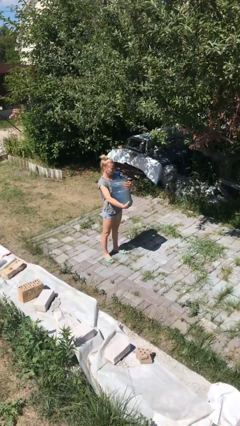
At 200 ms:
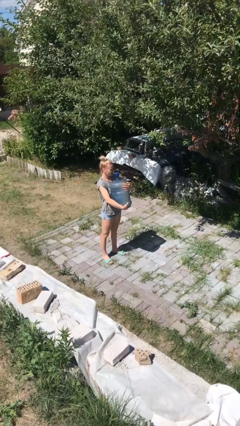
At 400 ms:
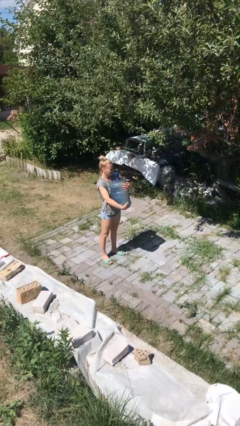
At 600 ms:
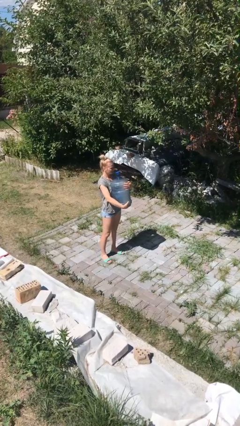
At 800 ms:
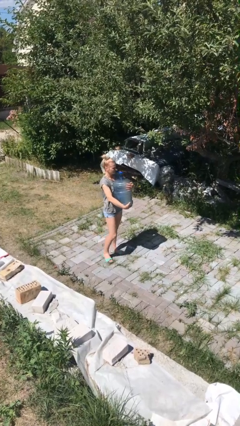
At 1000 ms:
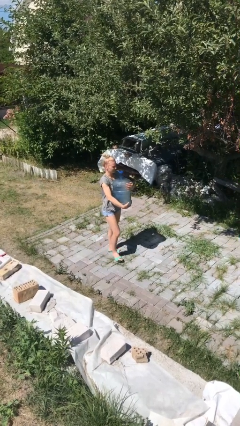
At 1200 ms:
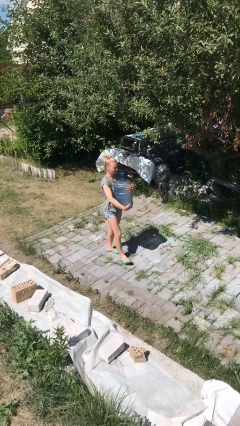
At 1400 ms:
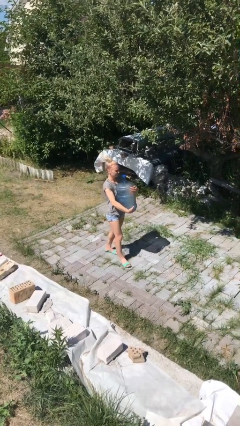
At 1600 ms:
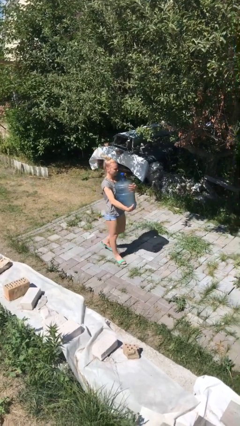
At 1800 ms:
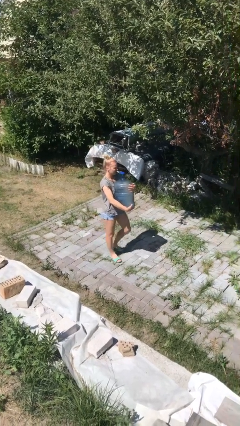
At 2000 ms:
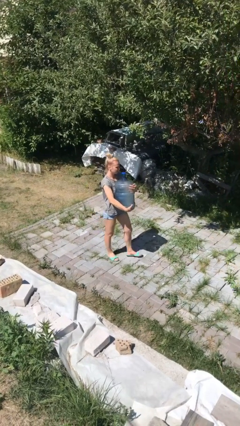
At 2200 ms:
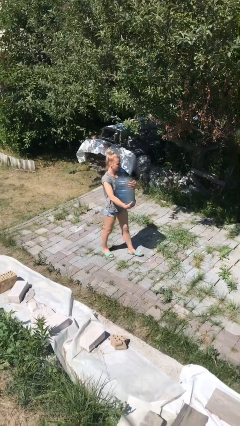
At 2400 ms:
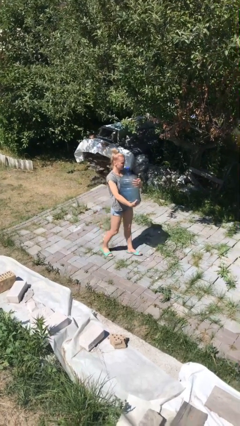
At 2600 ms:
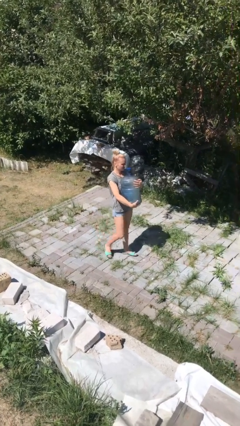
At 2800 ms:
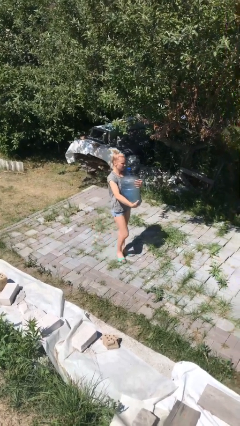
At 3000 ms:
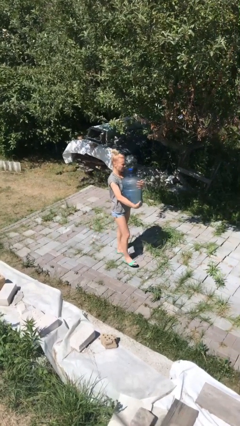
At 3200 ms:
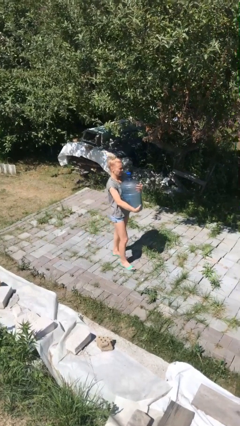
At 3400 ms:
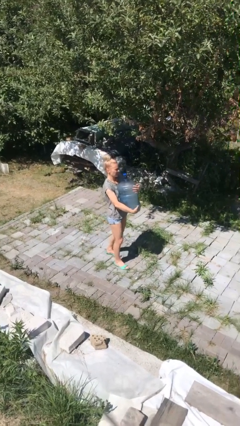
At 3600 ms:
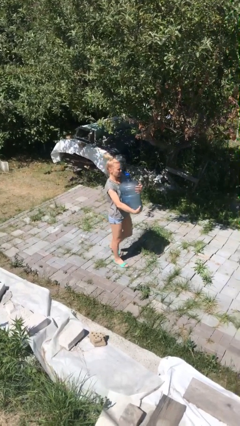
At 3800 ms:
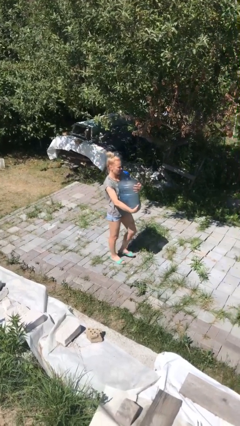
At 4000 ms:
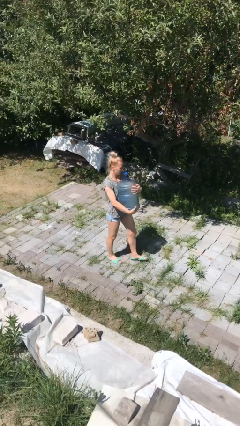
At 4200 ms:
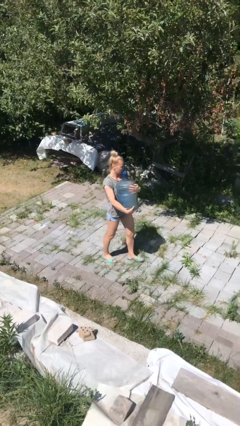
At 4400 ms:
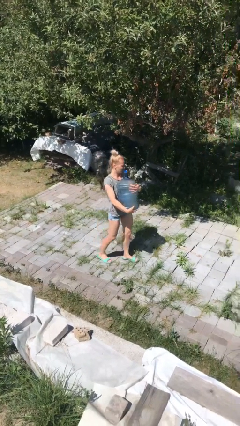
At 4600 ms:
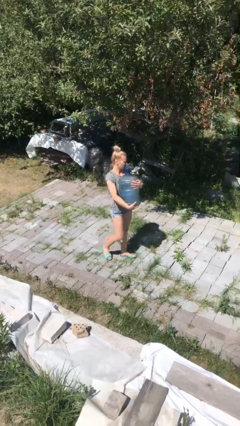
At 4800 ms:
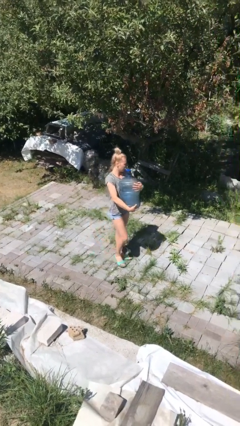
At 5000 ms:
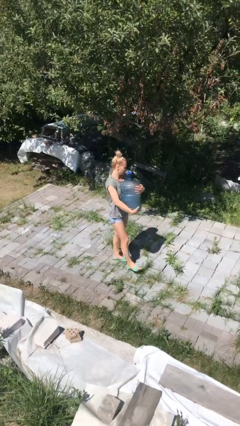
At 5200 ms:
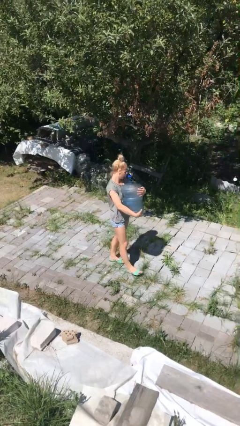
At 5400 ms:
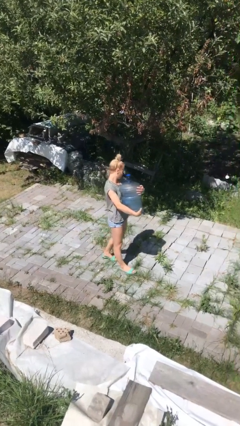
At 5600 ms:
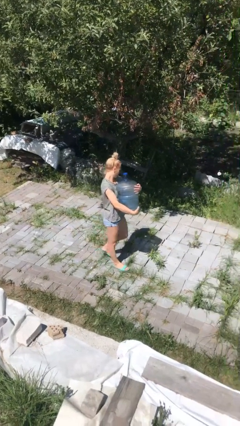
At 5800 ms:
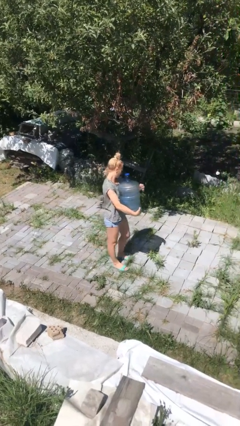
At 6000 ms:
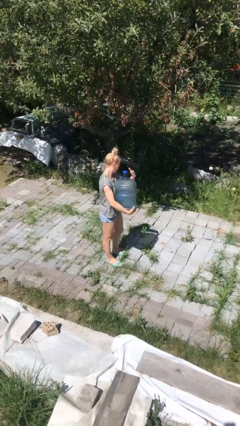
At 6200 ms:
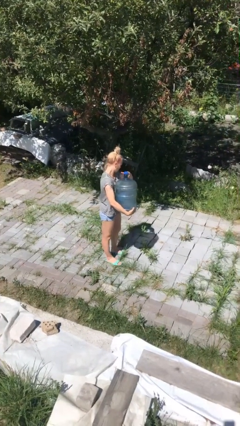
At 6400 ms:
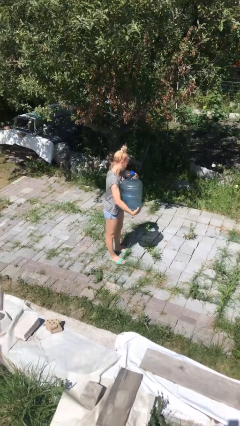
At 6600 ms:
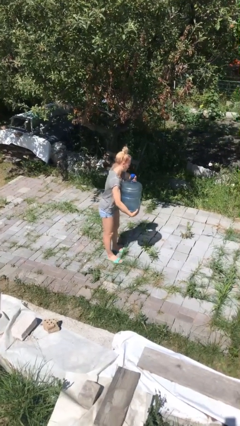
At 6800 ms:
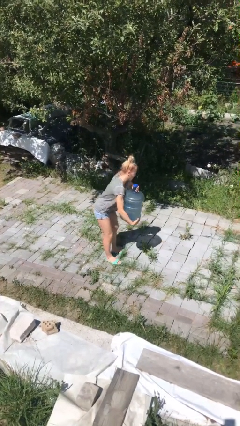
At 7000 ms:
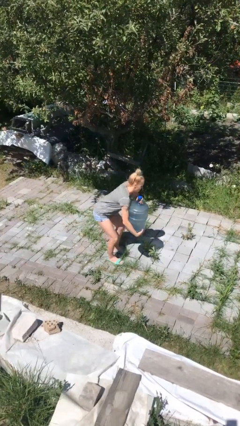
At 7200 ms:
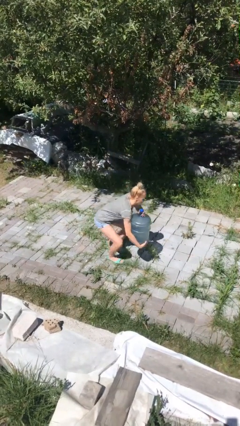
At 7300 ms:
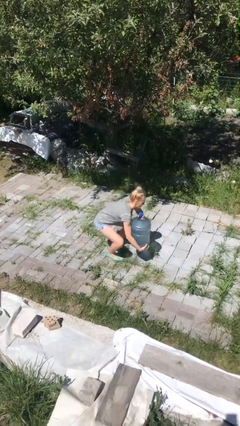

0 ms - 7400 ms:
person carries heavy object

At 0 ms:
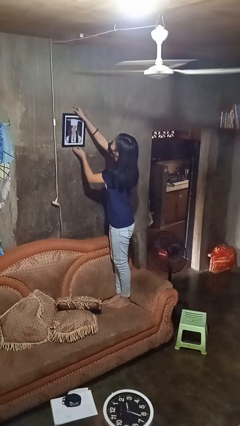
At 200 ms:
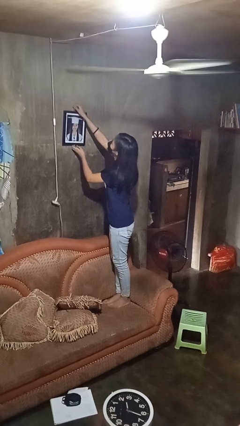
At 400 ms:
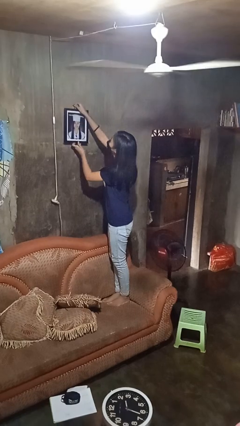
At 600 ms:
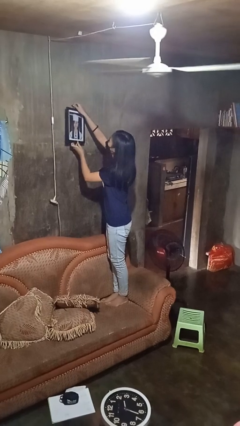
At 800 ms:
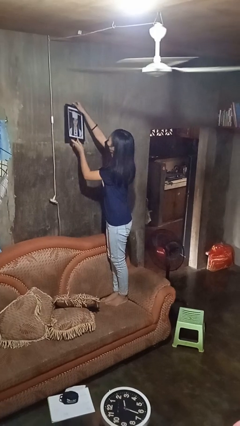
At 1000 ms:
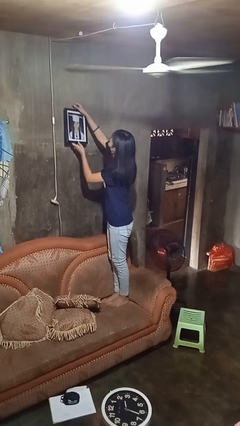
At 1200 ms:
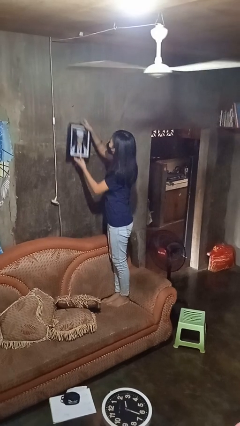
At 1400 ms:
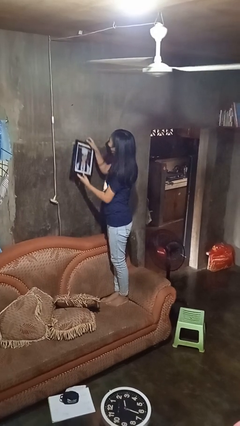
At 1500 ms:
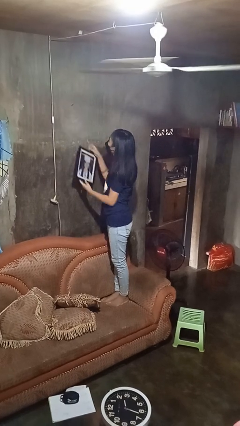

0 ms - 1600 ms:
person takes down picture frame

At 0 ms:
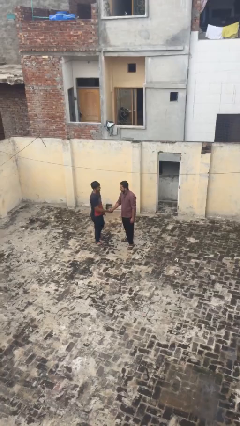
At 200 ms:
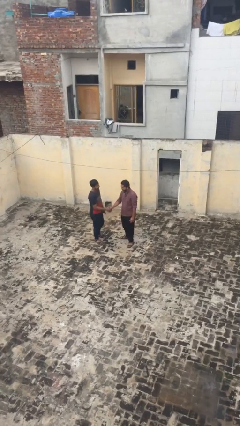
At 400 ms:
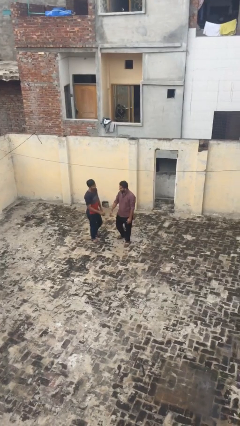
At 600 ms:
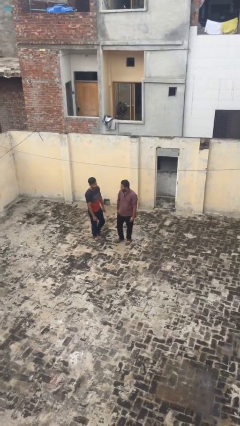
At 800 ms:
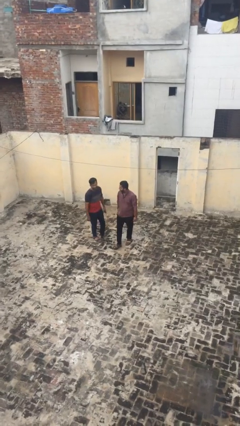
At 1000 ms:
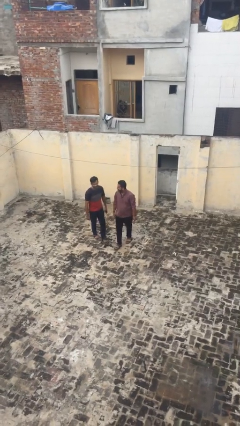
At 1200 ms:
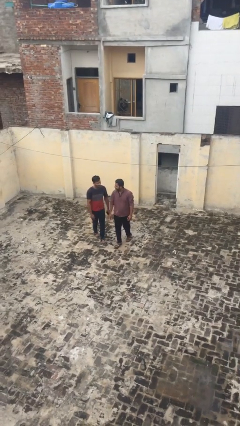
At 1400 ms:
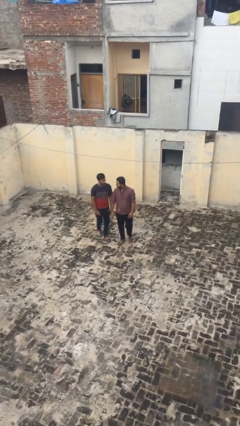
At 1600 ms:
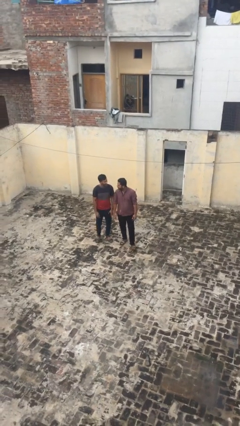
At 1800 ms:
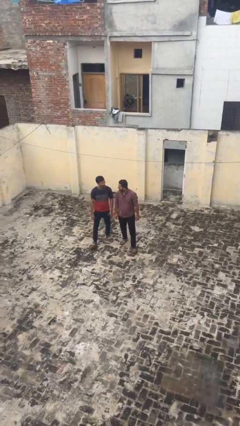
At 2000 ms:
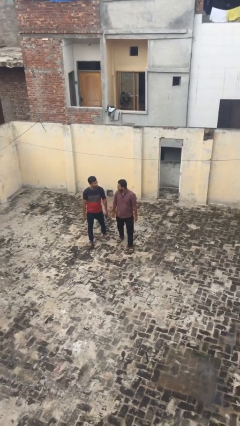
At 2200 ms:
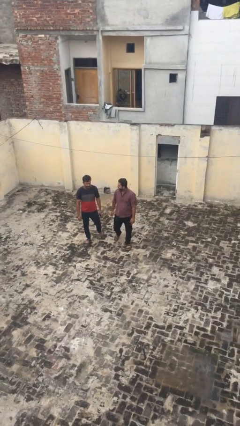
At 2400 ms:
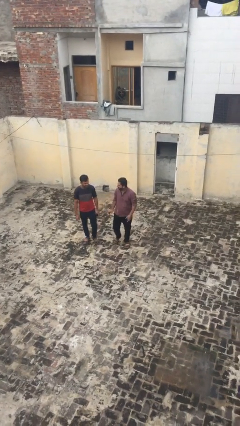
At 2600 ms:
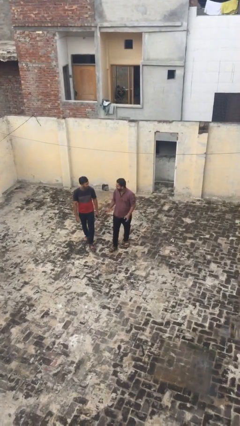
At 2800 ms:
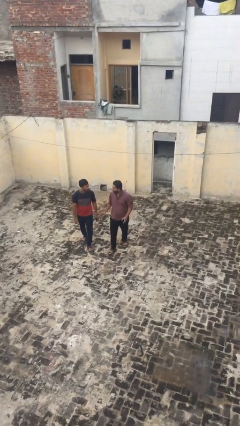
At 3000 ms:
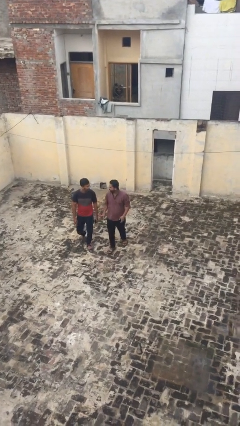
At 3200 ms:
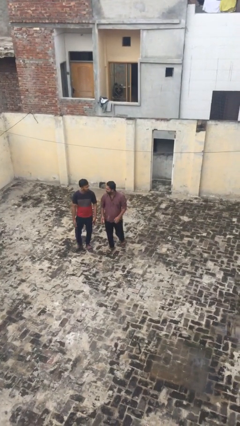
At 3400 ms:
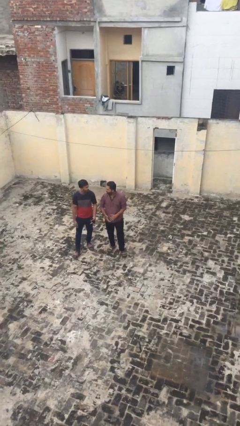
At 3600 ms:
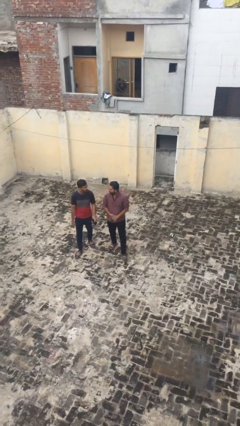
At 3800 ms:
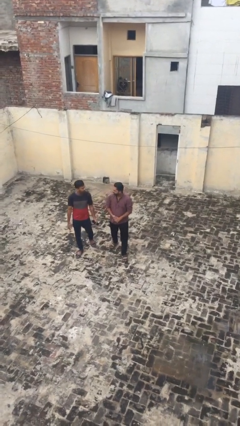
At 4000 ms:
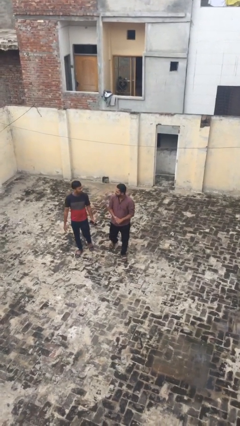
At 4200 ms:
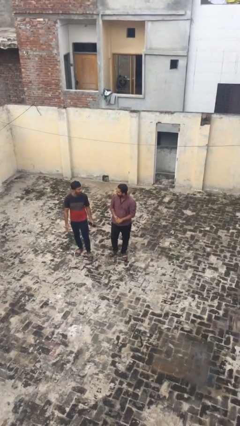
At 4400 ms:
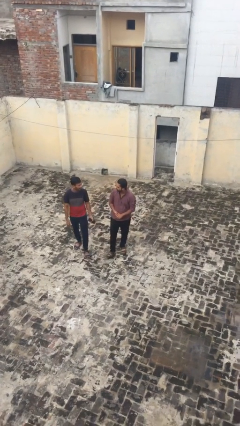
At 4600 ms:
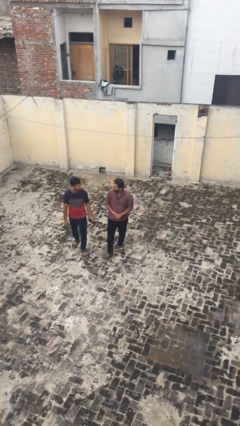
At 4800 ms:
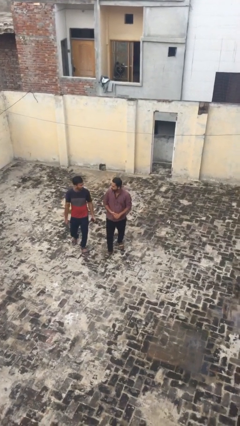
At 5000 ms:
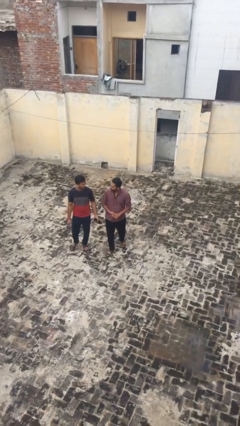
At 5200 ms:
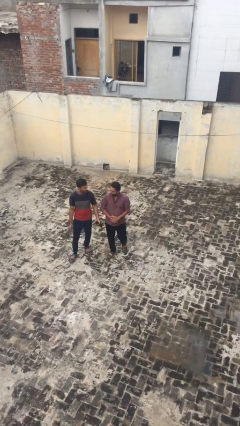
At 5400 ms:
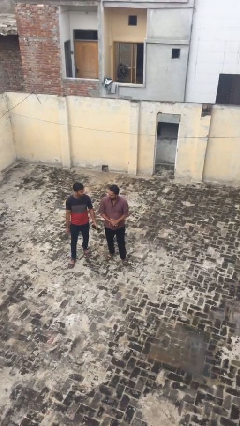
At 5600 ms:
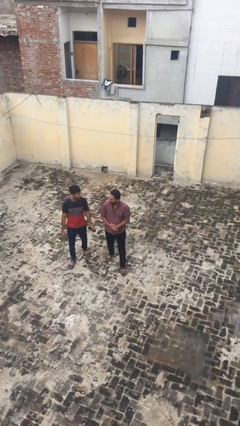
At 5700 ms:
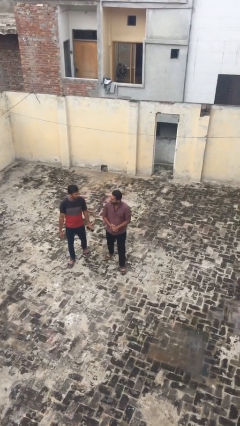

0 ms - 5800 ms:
person talks to person

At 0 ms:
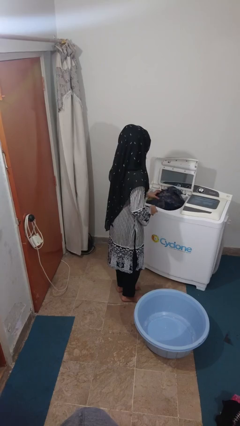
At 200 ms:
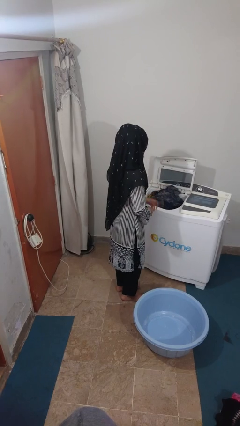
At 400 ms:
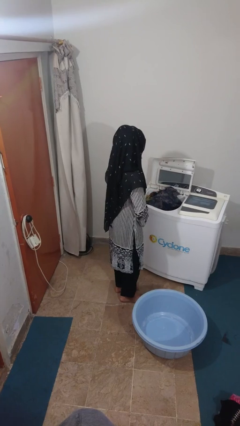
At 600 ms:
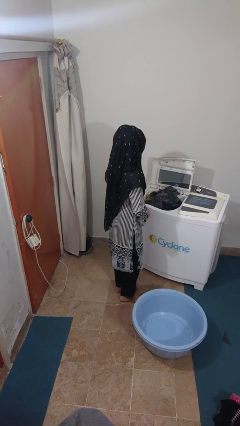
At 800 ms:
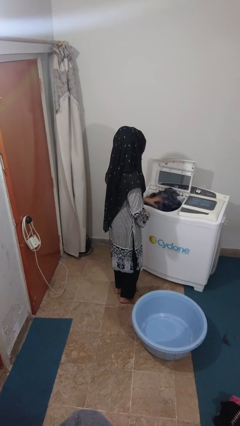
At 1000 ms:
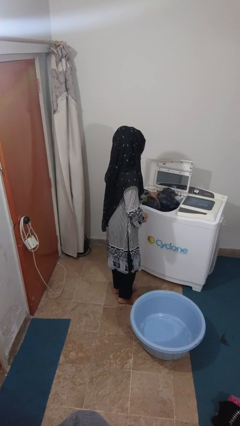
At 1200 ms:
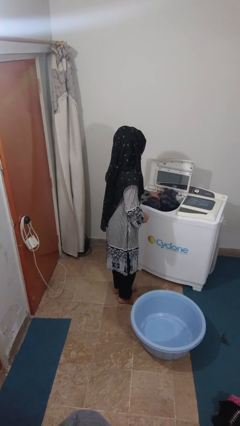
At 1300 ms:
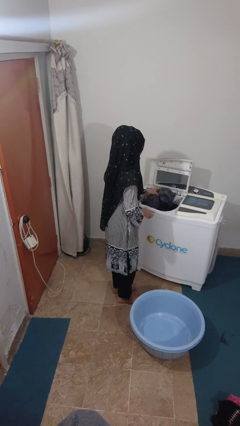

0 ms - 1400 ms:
person loads clotheswasher

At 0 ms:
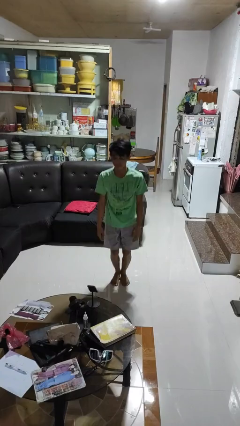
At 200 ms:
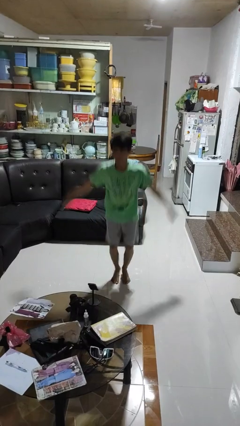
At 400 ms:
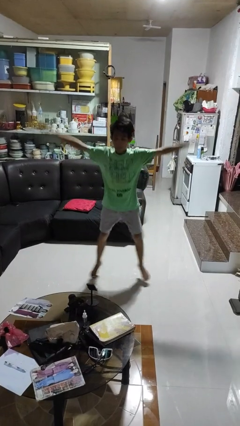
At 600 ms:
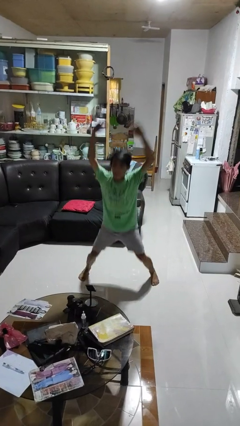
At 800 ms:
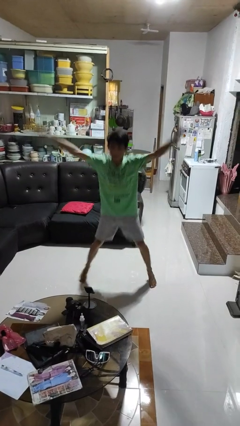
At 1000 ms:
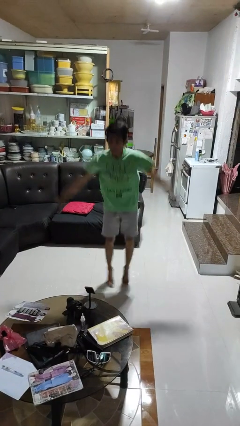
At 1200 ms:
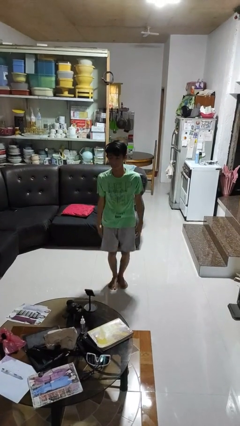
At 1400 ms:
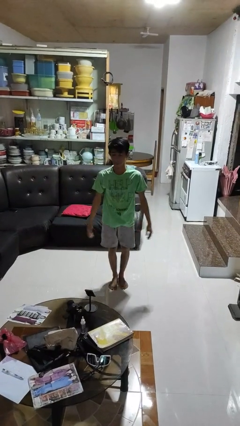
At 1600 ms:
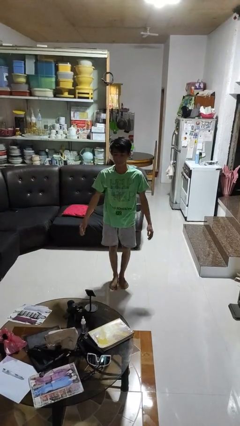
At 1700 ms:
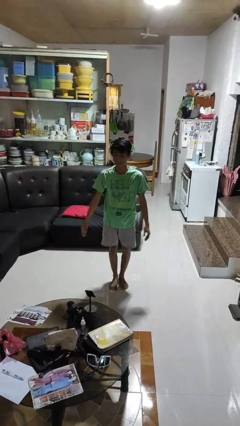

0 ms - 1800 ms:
person exercises with jumping jacks
